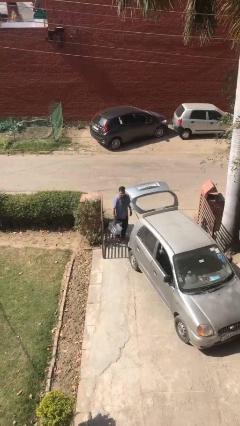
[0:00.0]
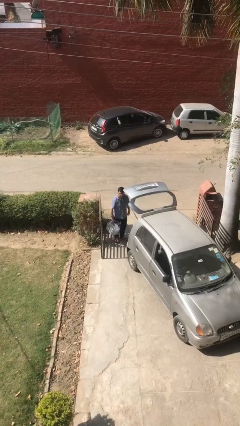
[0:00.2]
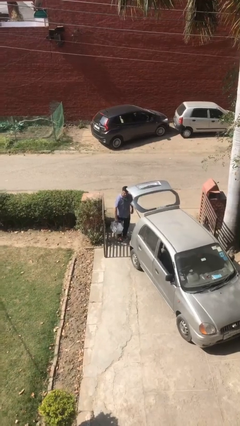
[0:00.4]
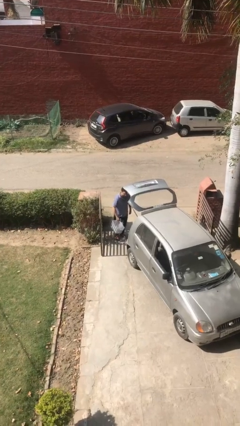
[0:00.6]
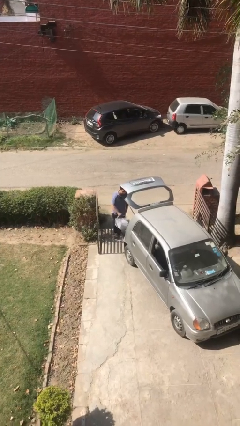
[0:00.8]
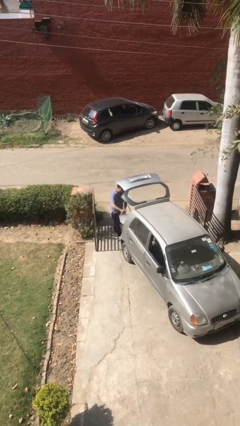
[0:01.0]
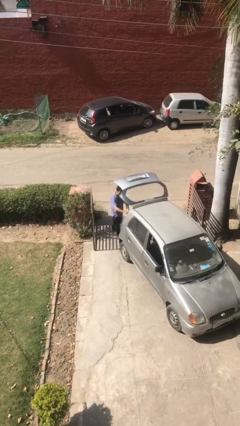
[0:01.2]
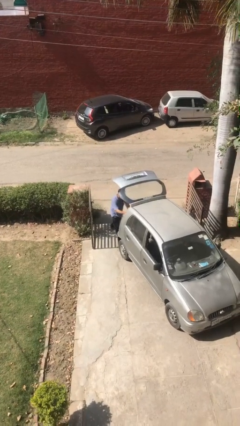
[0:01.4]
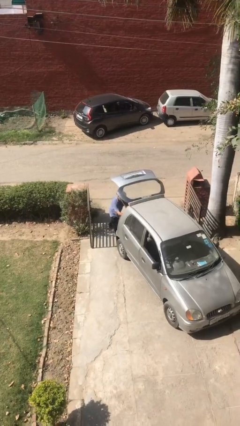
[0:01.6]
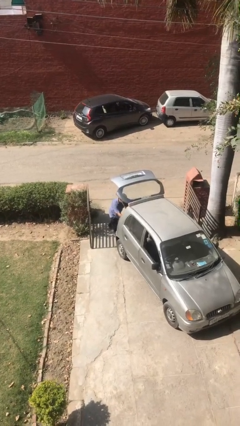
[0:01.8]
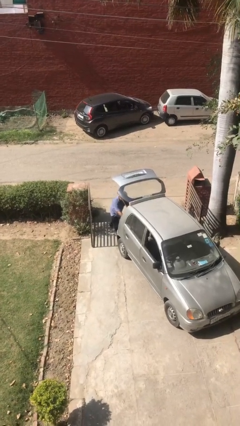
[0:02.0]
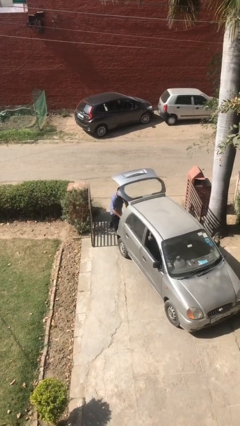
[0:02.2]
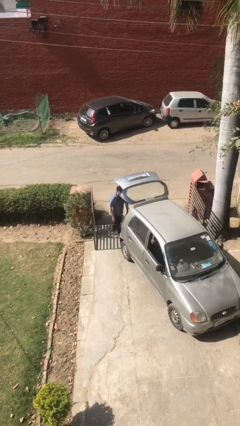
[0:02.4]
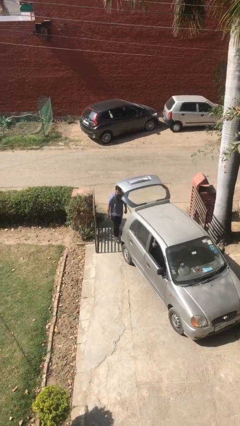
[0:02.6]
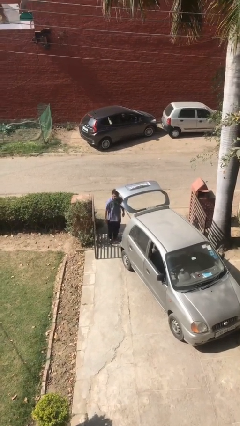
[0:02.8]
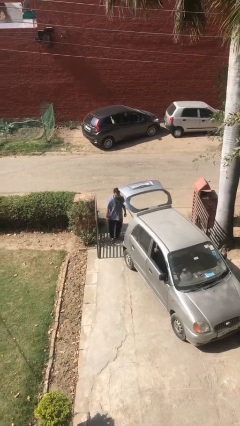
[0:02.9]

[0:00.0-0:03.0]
person loads car

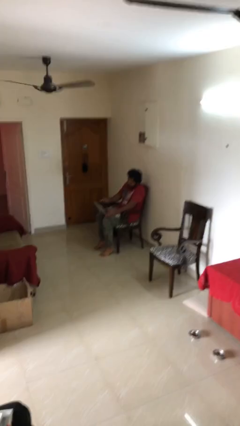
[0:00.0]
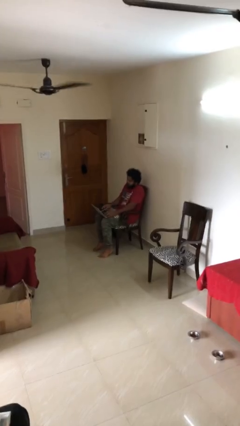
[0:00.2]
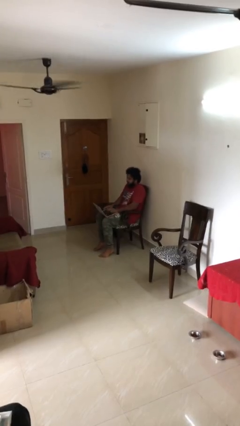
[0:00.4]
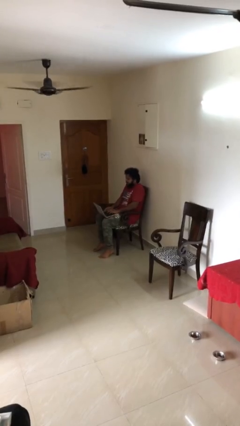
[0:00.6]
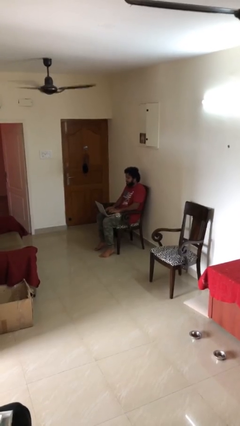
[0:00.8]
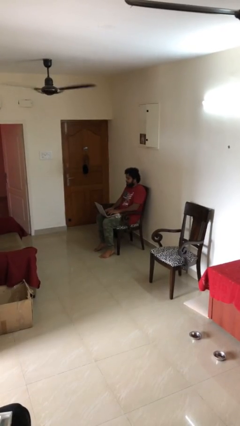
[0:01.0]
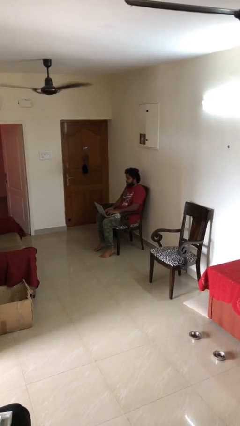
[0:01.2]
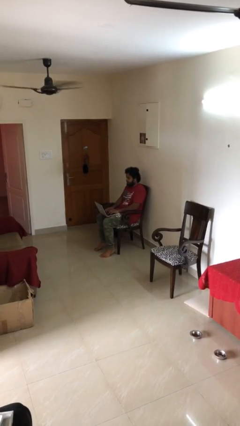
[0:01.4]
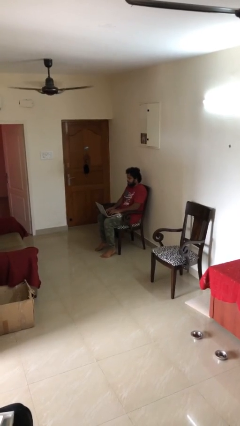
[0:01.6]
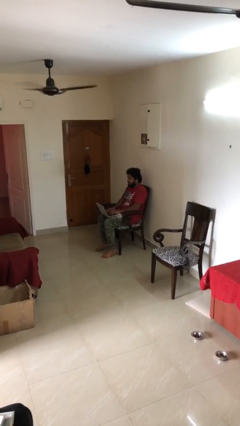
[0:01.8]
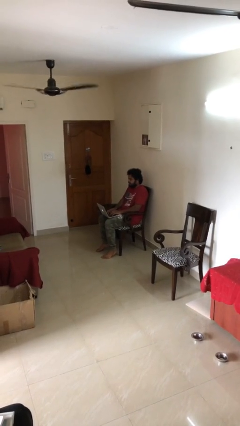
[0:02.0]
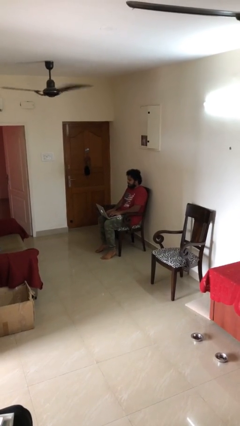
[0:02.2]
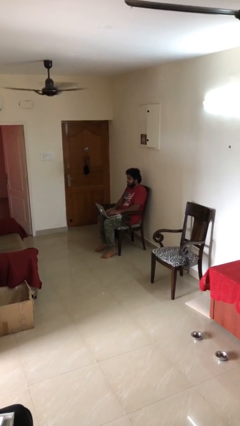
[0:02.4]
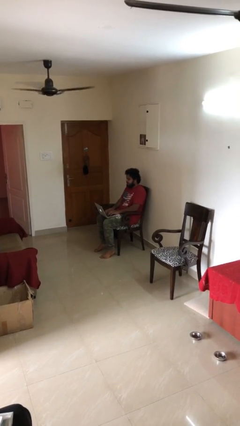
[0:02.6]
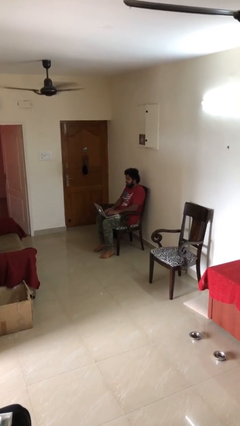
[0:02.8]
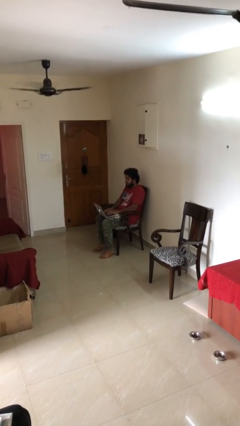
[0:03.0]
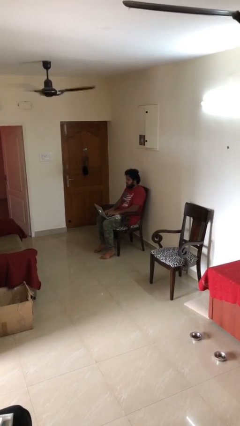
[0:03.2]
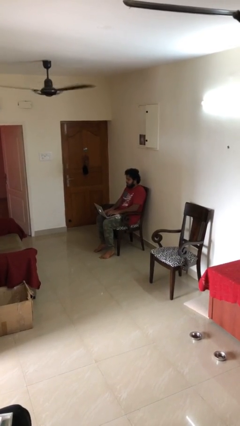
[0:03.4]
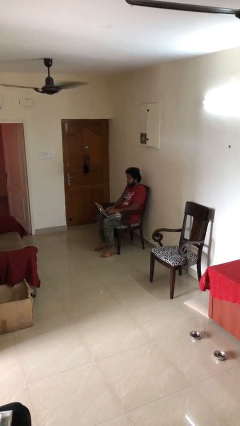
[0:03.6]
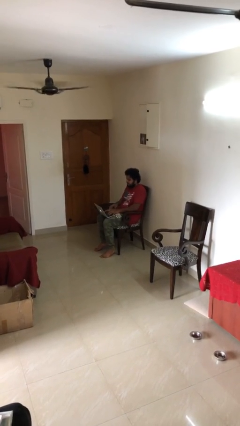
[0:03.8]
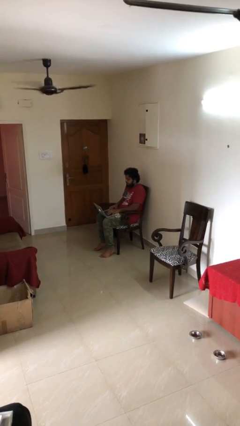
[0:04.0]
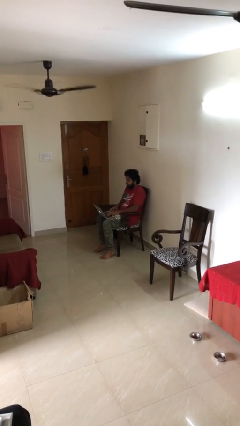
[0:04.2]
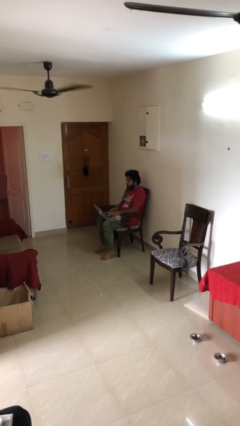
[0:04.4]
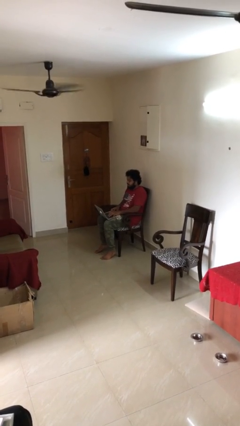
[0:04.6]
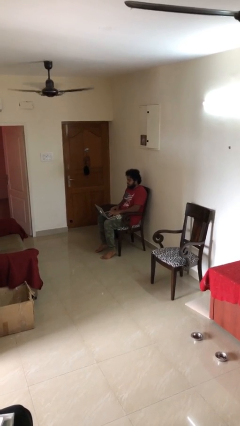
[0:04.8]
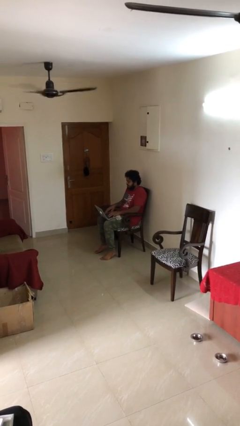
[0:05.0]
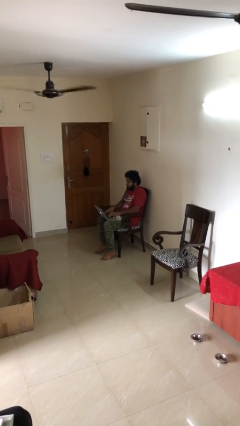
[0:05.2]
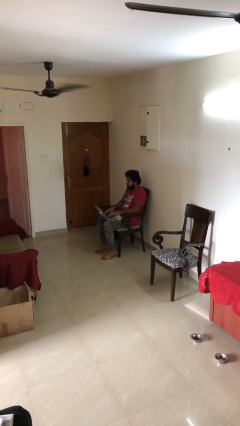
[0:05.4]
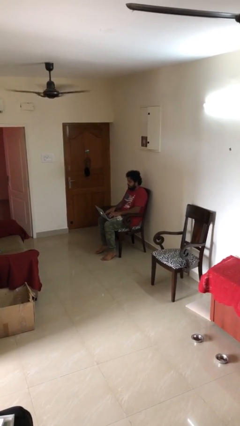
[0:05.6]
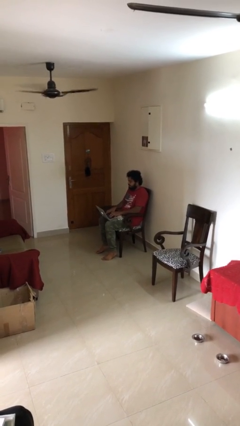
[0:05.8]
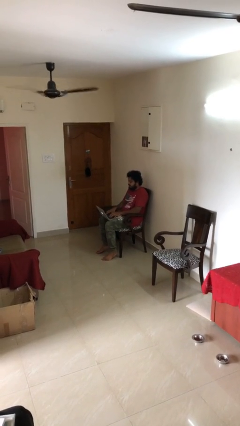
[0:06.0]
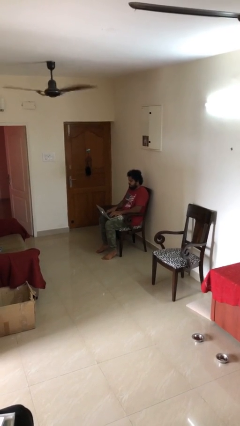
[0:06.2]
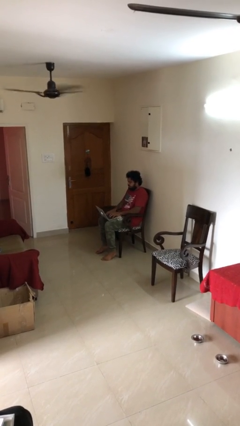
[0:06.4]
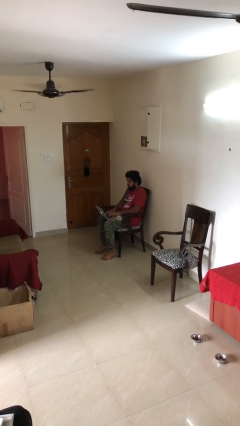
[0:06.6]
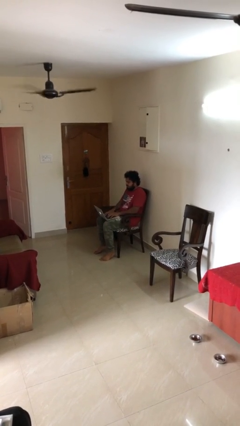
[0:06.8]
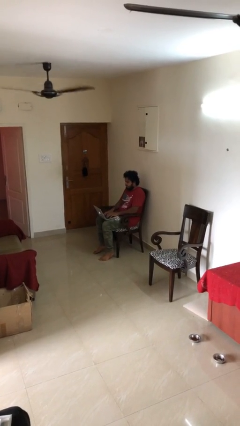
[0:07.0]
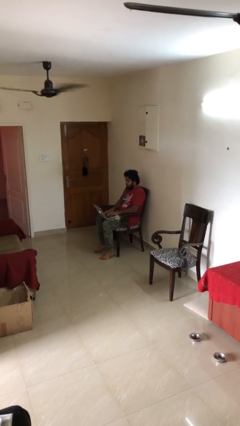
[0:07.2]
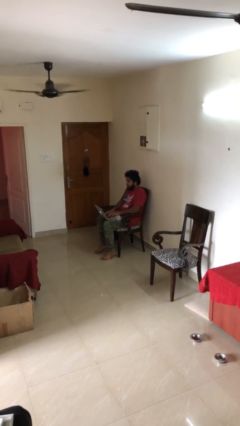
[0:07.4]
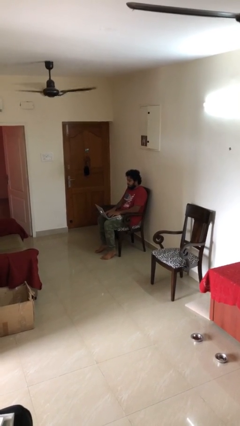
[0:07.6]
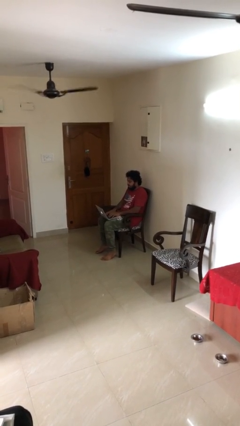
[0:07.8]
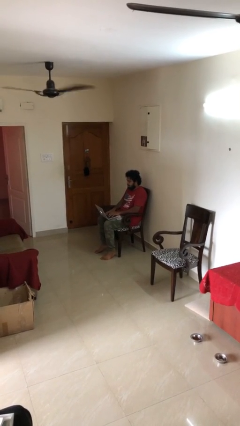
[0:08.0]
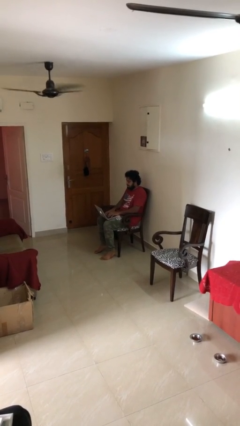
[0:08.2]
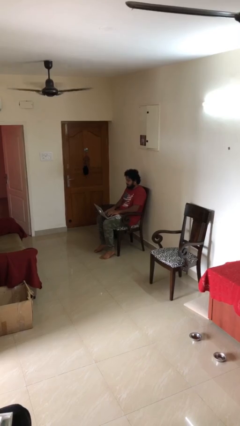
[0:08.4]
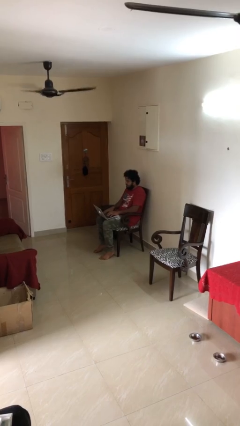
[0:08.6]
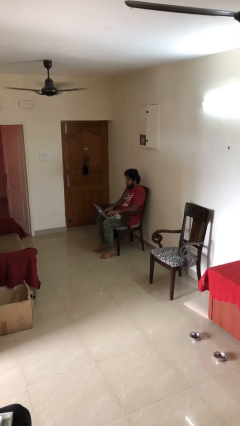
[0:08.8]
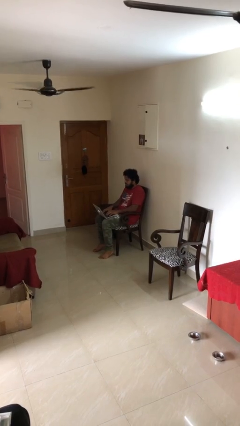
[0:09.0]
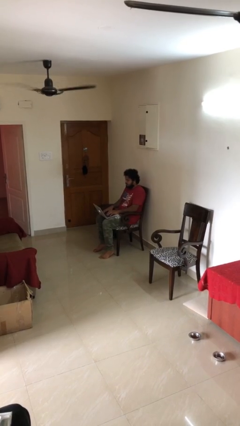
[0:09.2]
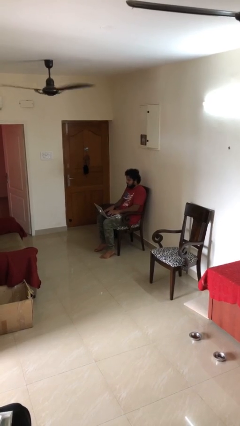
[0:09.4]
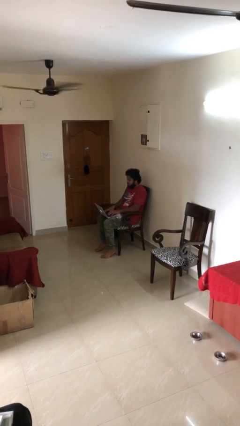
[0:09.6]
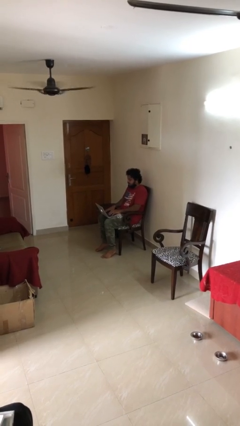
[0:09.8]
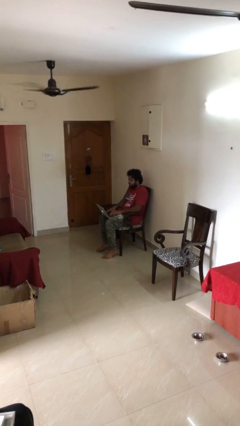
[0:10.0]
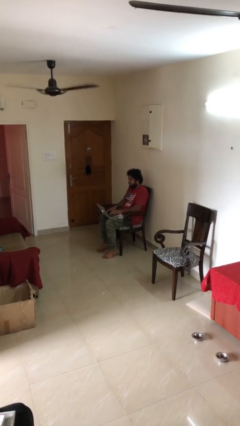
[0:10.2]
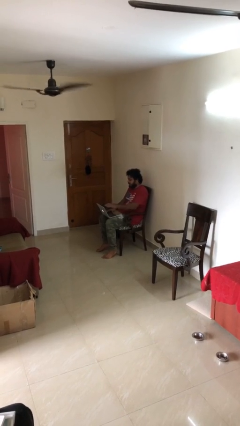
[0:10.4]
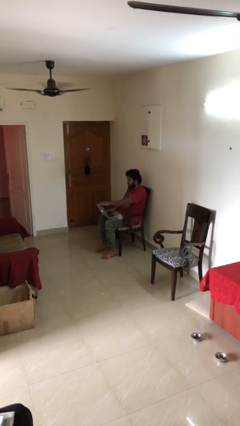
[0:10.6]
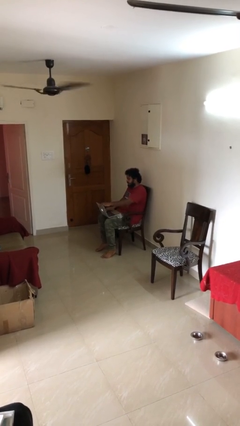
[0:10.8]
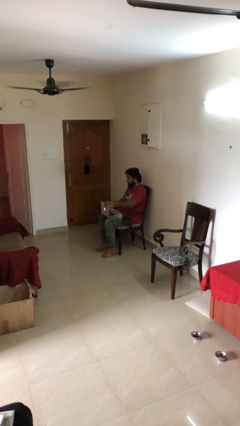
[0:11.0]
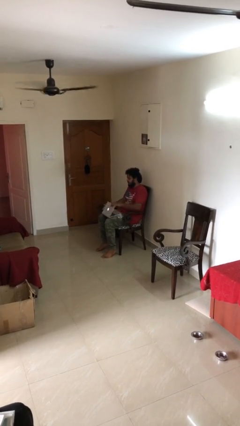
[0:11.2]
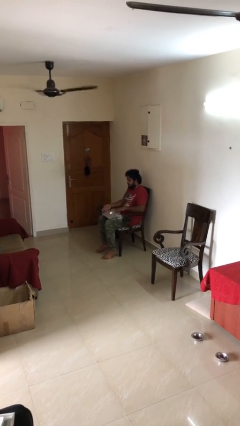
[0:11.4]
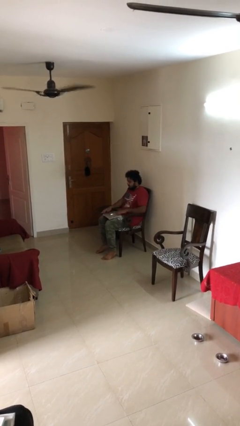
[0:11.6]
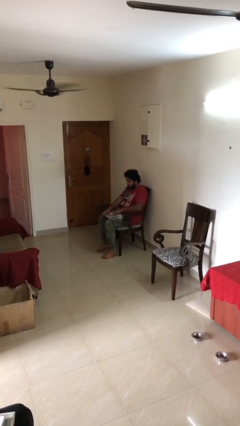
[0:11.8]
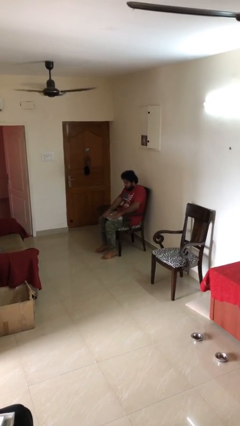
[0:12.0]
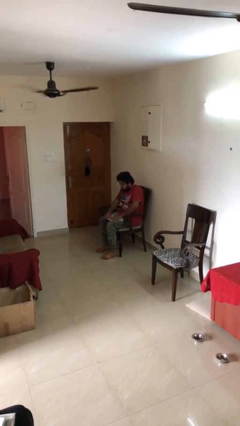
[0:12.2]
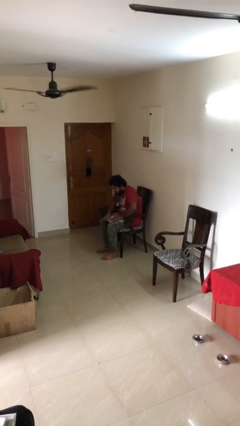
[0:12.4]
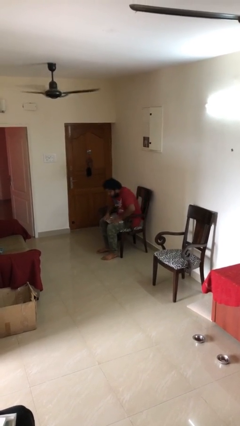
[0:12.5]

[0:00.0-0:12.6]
person interacts with laptop

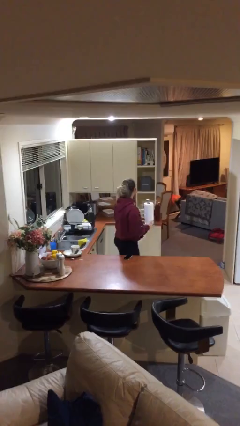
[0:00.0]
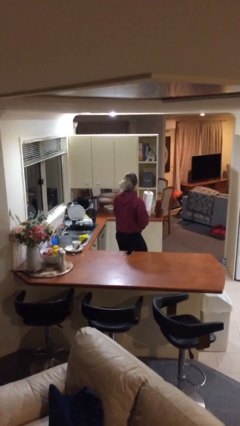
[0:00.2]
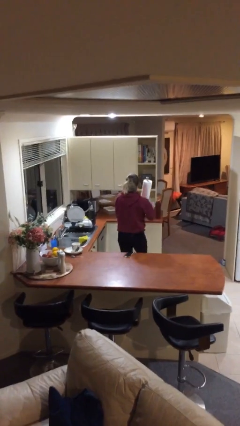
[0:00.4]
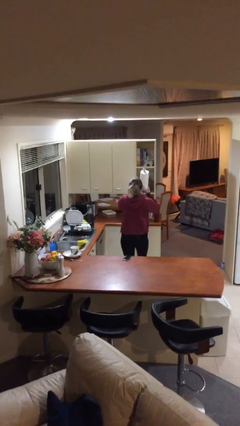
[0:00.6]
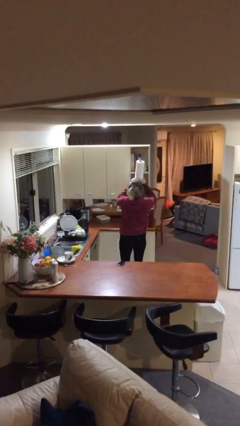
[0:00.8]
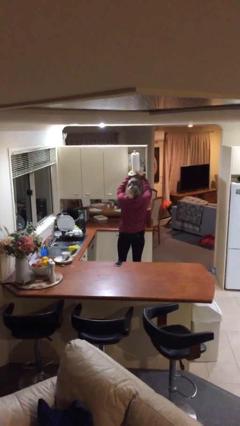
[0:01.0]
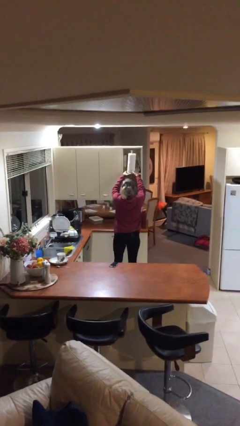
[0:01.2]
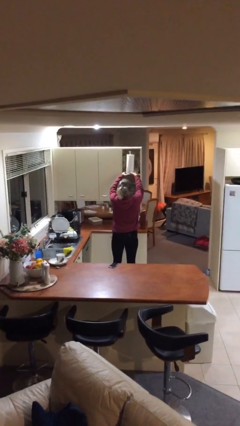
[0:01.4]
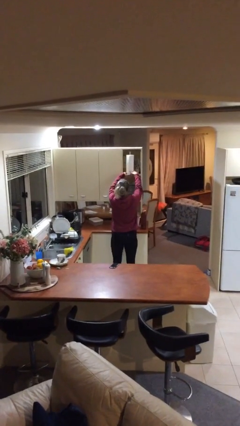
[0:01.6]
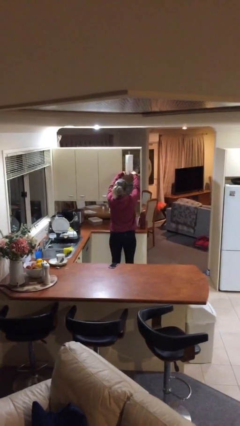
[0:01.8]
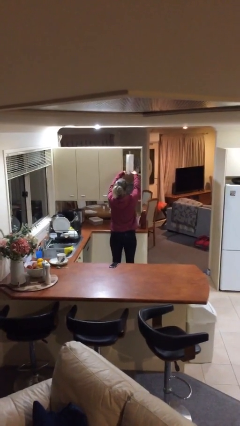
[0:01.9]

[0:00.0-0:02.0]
person puts down object on shelf

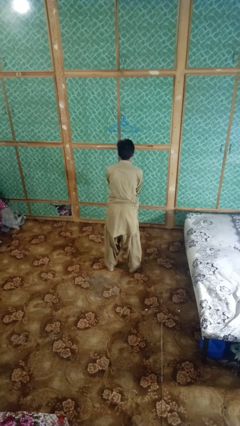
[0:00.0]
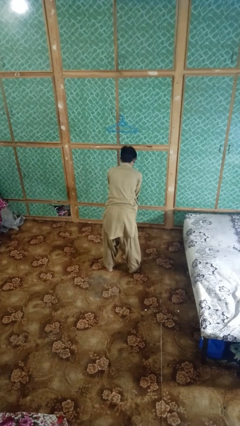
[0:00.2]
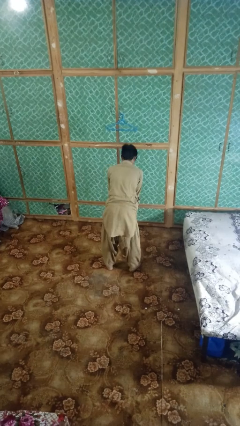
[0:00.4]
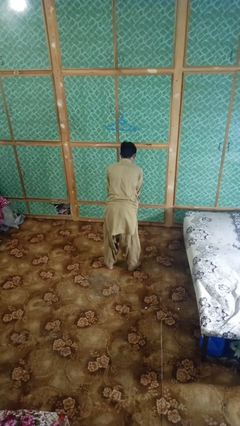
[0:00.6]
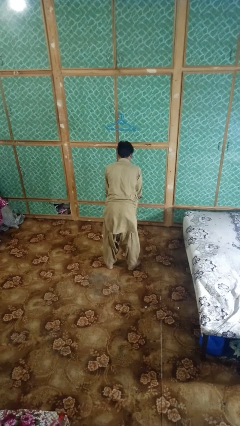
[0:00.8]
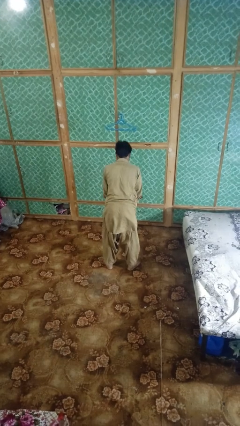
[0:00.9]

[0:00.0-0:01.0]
person catches dropped object
